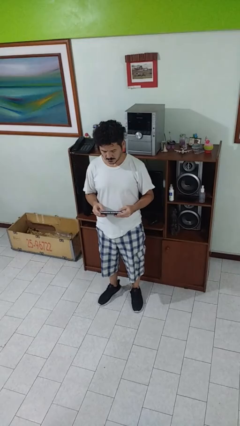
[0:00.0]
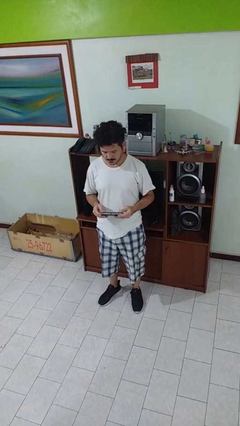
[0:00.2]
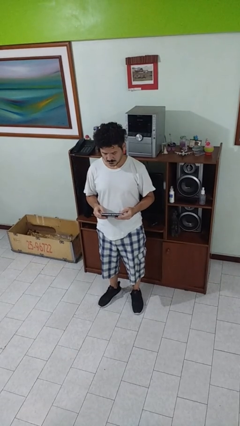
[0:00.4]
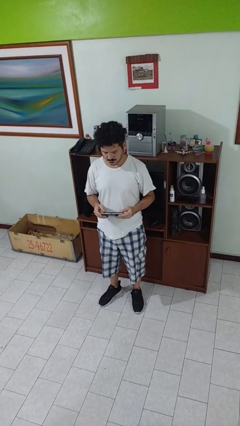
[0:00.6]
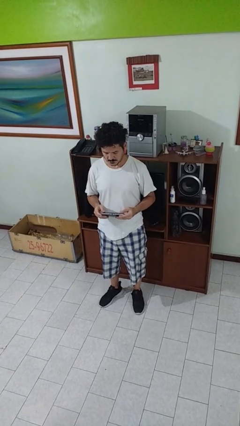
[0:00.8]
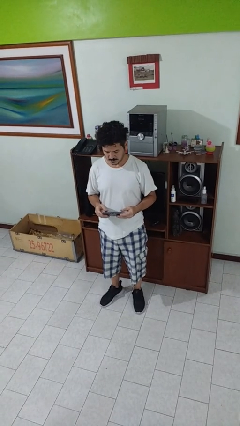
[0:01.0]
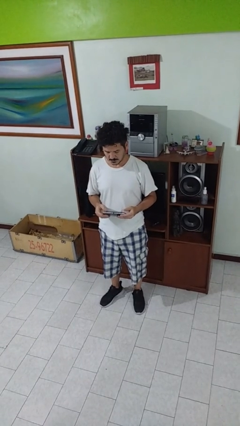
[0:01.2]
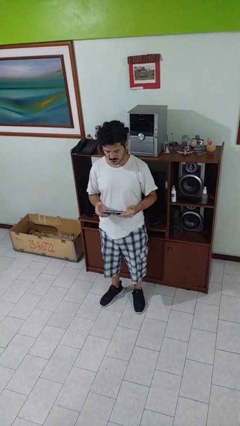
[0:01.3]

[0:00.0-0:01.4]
person interacts with handheld game

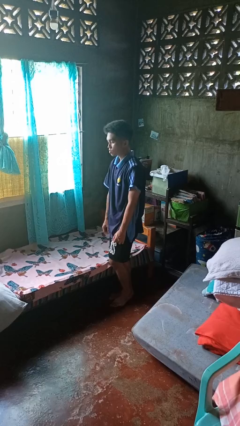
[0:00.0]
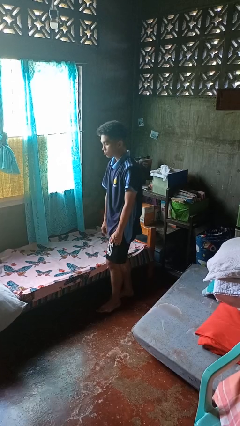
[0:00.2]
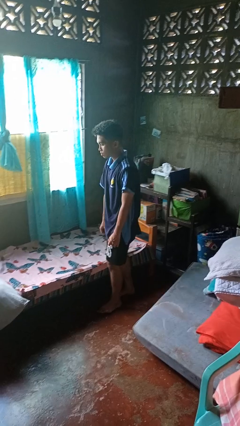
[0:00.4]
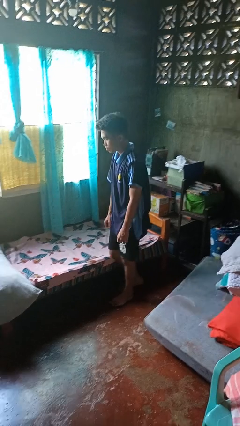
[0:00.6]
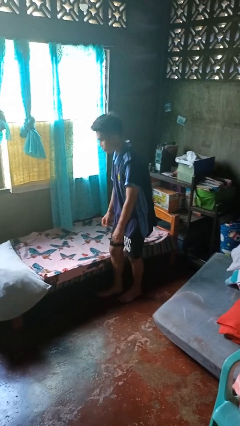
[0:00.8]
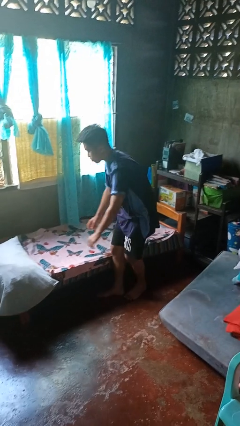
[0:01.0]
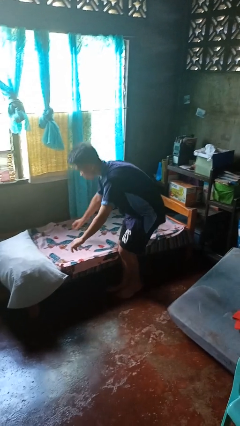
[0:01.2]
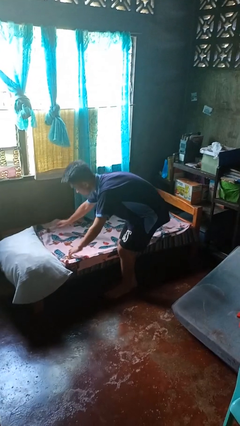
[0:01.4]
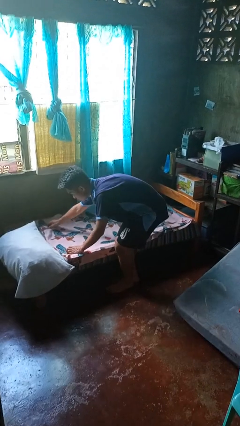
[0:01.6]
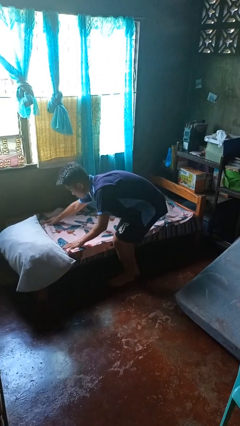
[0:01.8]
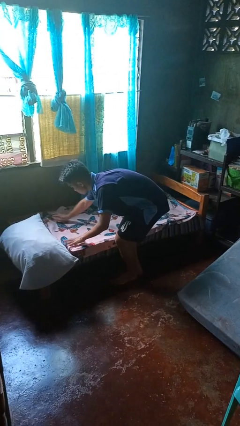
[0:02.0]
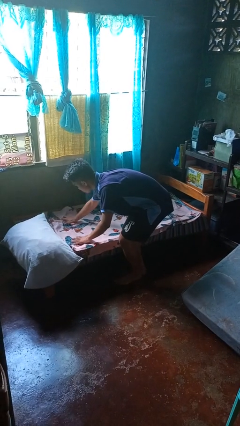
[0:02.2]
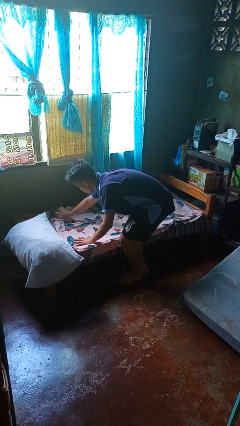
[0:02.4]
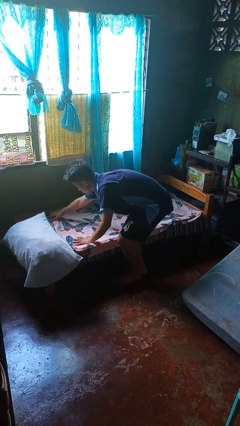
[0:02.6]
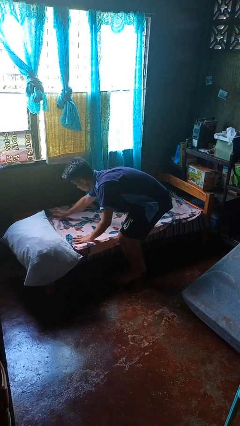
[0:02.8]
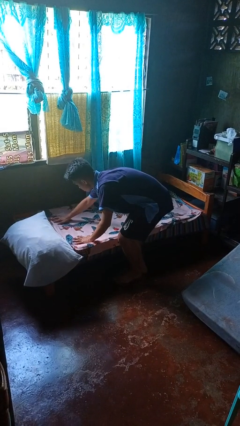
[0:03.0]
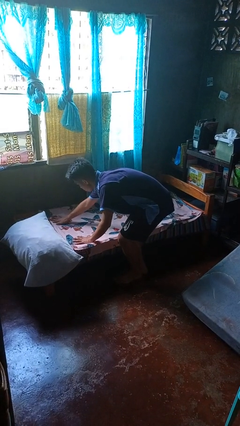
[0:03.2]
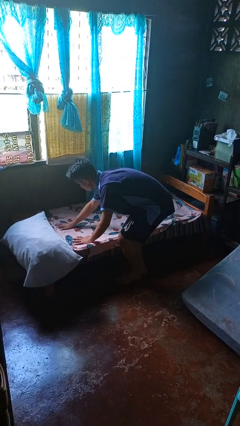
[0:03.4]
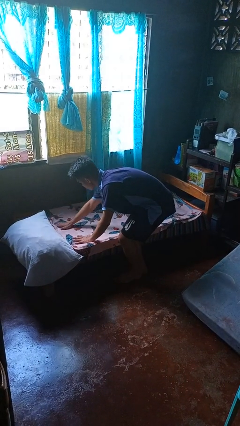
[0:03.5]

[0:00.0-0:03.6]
person makes bed

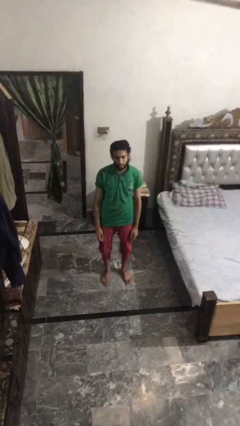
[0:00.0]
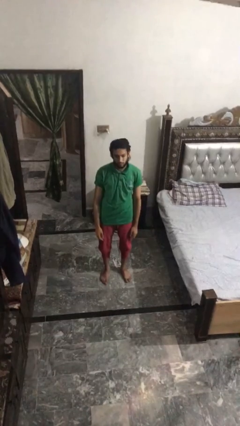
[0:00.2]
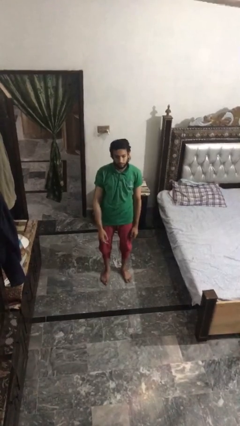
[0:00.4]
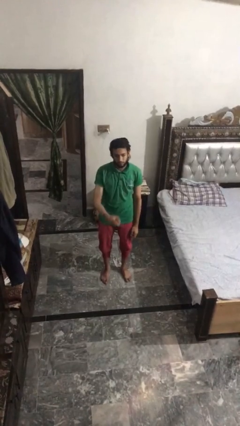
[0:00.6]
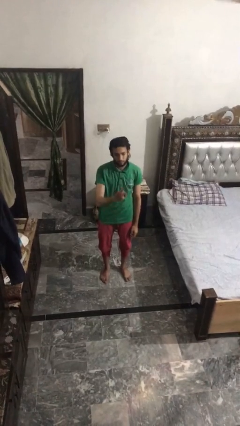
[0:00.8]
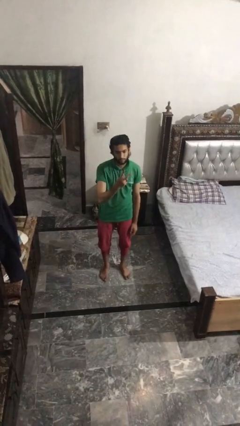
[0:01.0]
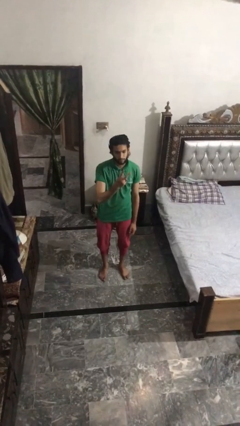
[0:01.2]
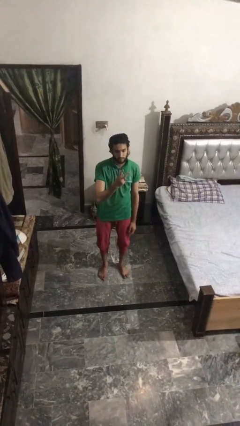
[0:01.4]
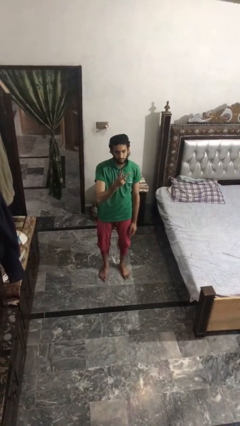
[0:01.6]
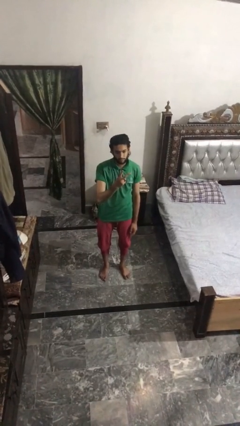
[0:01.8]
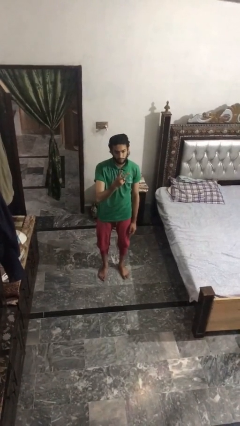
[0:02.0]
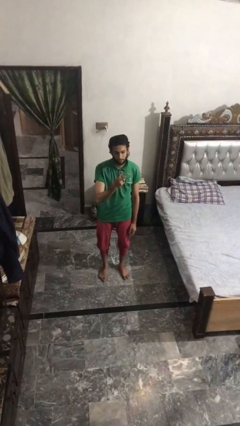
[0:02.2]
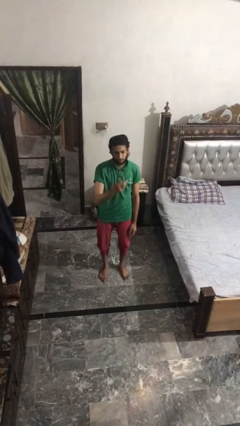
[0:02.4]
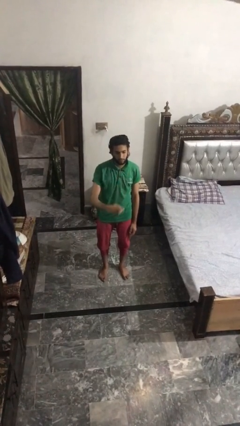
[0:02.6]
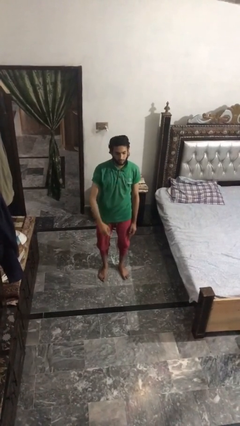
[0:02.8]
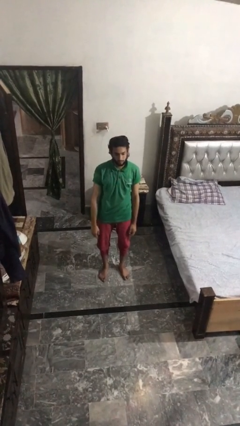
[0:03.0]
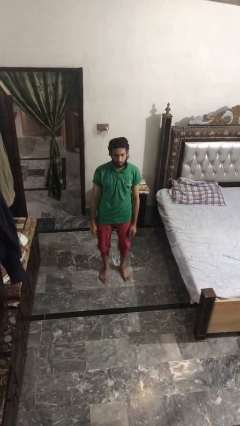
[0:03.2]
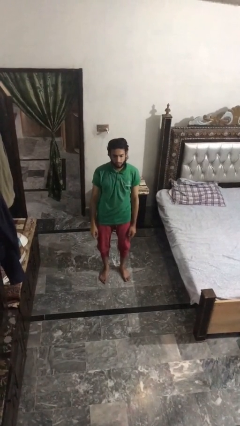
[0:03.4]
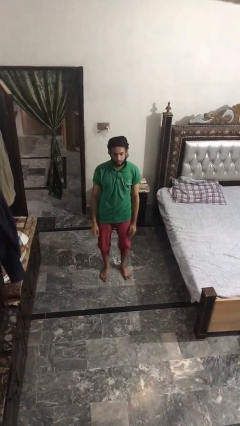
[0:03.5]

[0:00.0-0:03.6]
person gestures peace

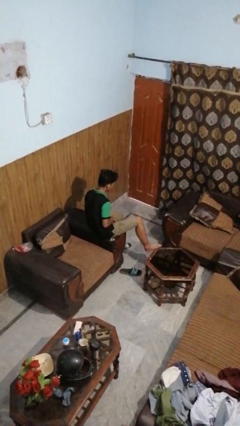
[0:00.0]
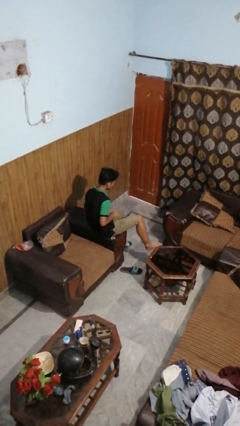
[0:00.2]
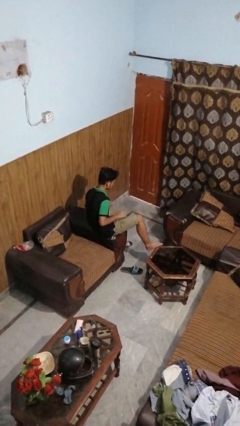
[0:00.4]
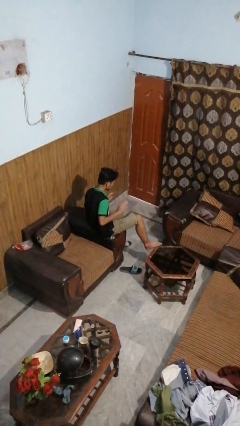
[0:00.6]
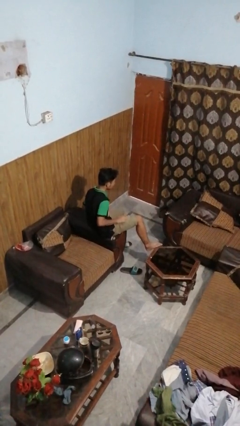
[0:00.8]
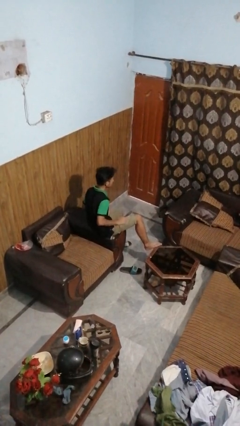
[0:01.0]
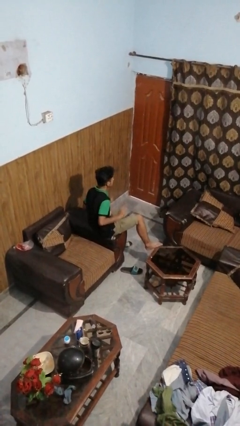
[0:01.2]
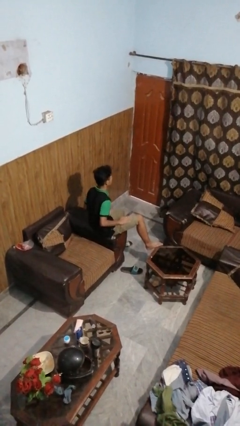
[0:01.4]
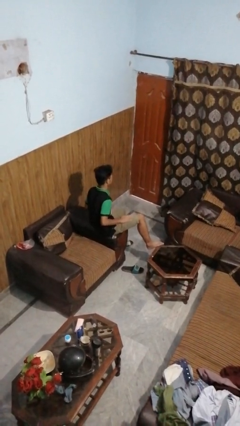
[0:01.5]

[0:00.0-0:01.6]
person slaps hands on thighs
